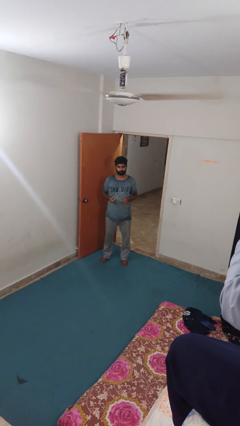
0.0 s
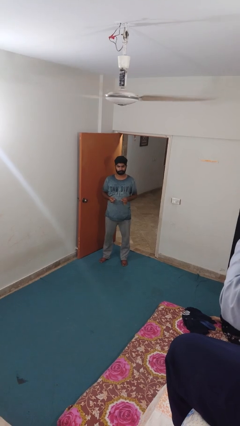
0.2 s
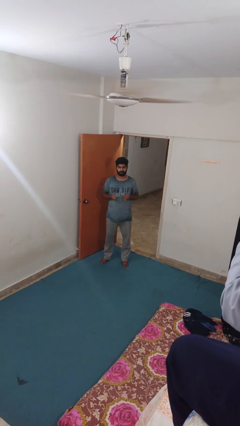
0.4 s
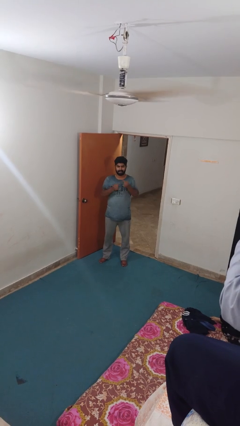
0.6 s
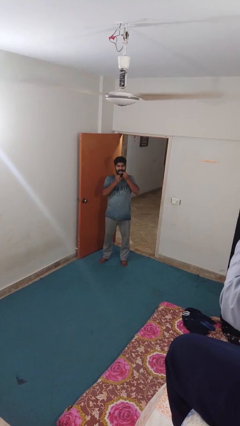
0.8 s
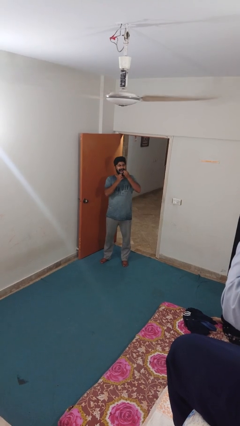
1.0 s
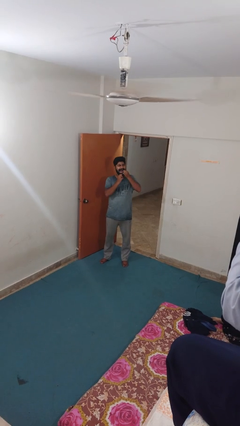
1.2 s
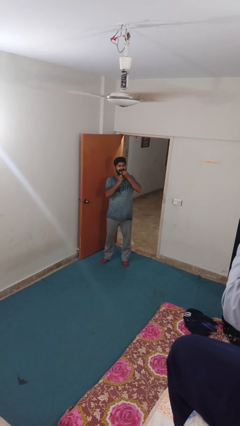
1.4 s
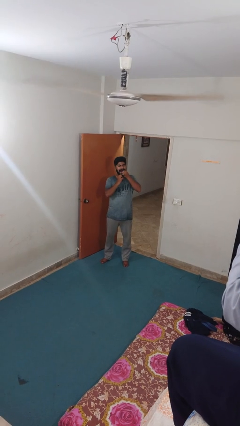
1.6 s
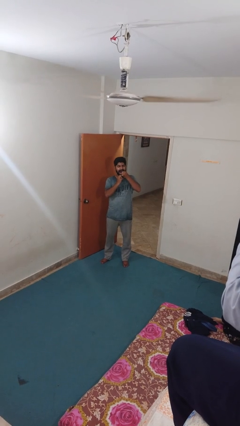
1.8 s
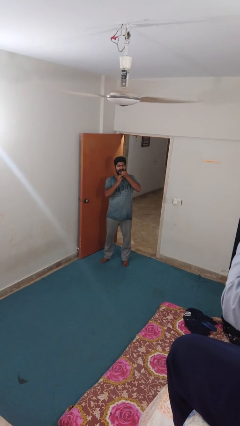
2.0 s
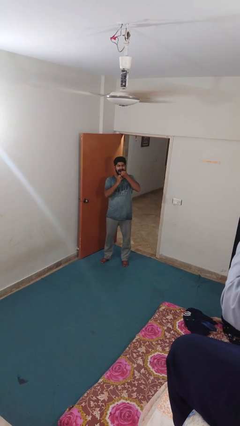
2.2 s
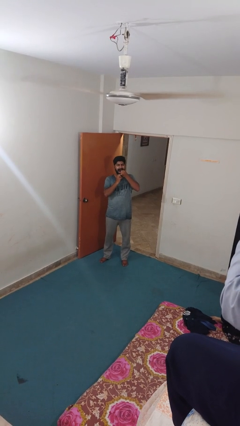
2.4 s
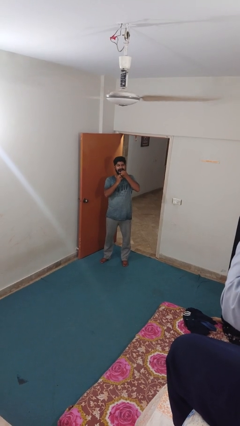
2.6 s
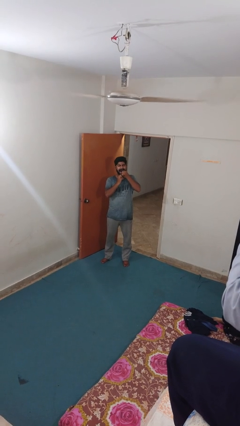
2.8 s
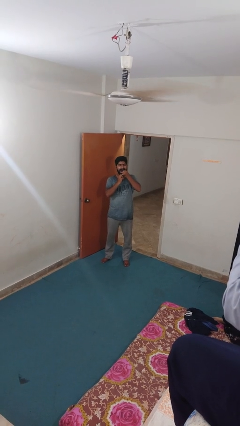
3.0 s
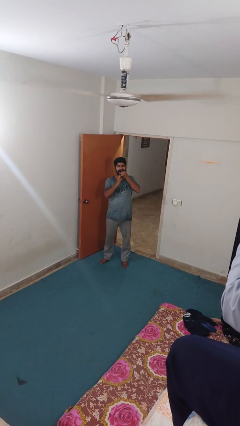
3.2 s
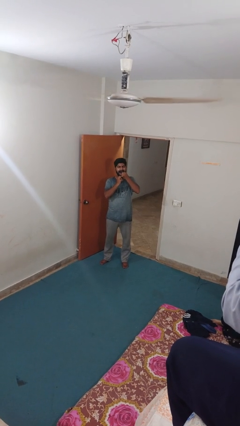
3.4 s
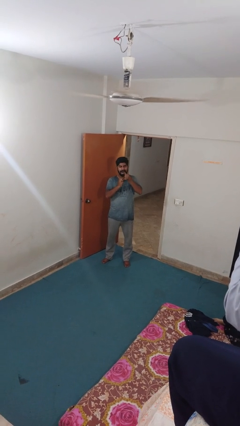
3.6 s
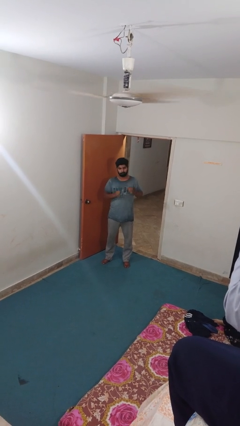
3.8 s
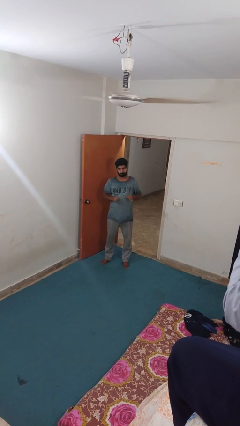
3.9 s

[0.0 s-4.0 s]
person flosses

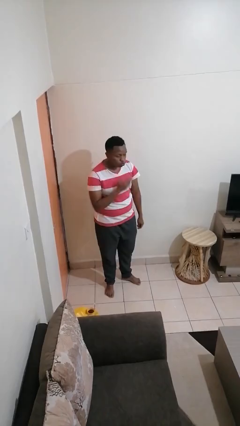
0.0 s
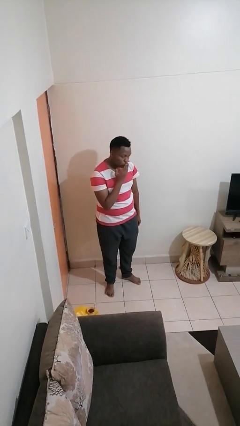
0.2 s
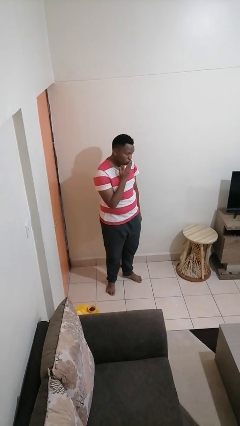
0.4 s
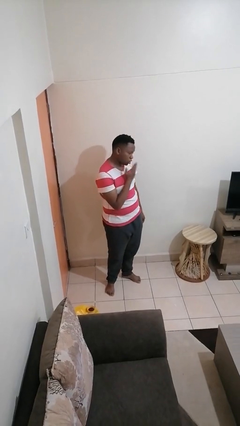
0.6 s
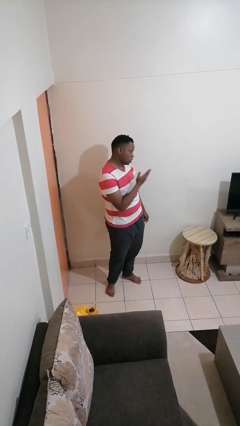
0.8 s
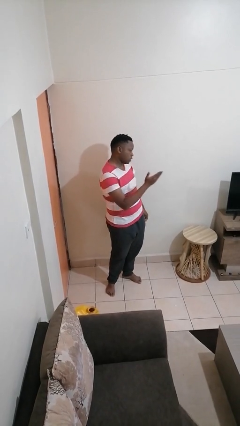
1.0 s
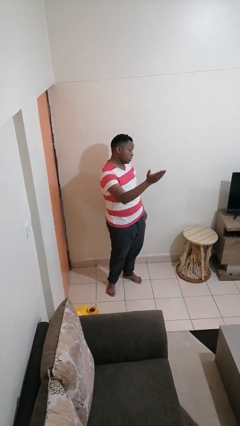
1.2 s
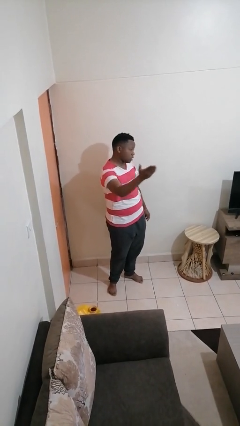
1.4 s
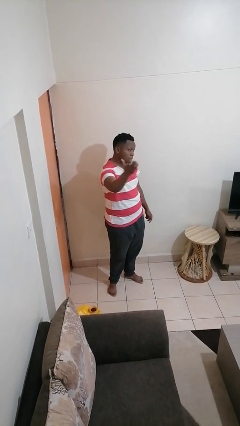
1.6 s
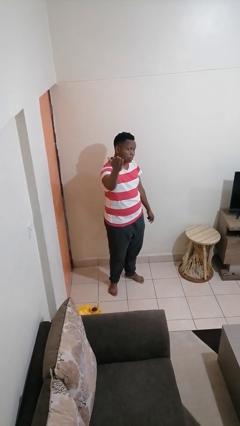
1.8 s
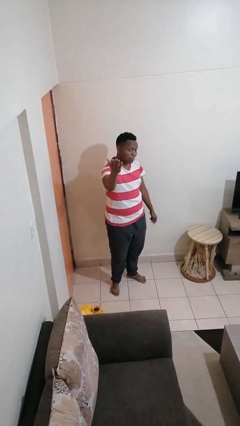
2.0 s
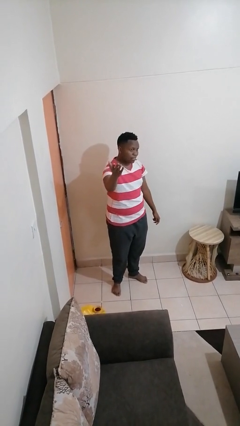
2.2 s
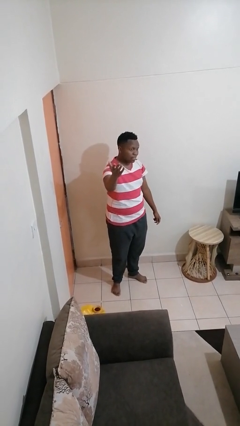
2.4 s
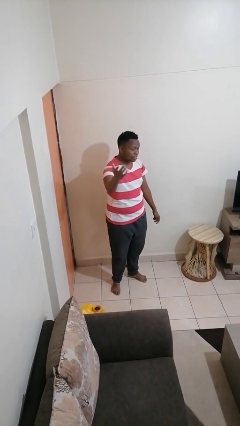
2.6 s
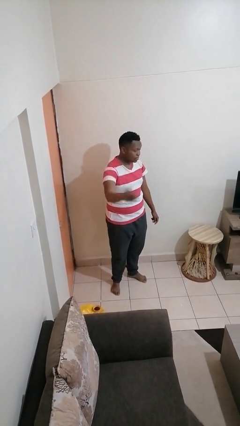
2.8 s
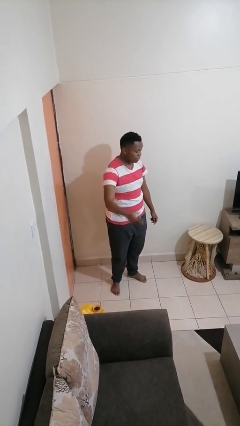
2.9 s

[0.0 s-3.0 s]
person gestures blow kiss

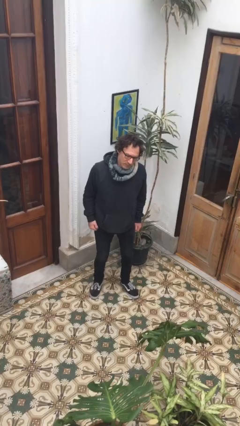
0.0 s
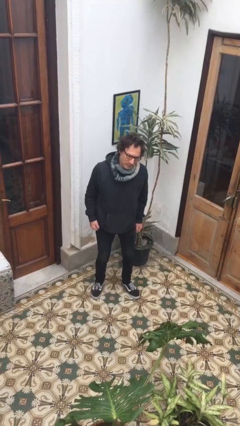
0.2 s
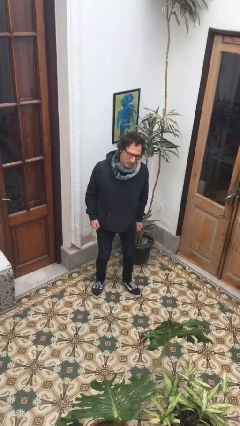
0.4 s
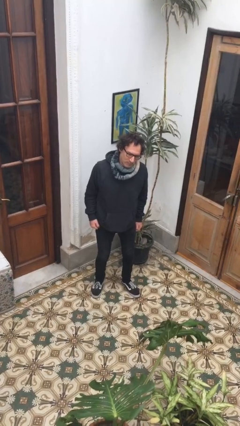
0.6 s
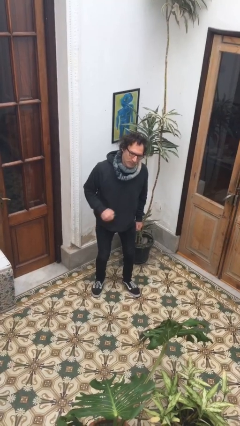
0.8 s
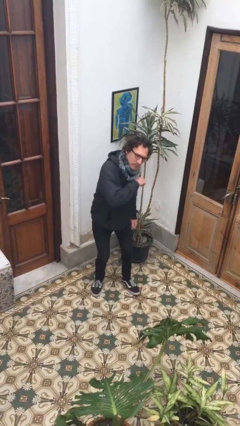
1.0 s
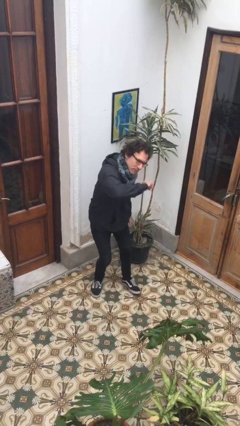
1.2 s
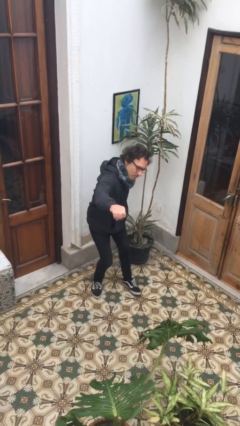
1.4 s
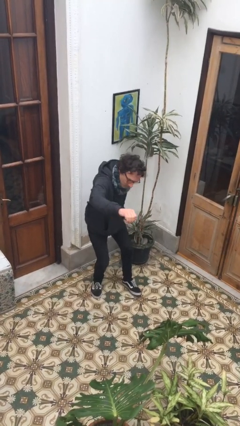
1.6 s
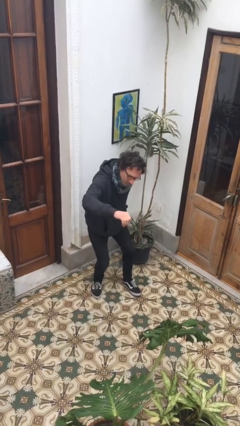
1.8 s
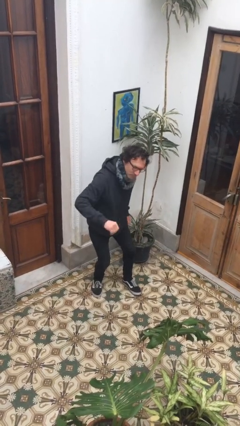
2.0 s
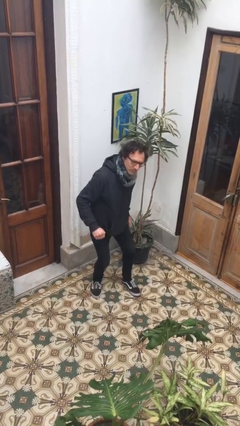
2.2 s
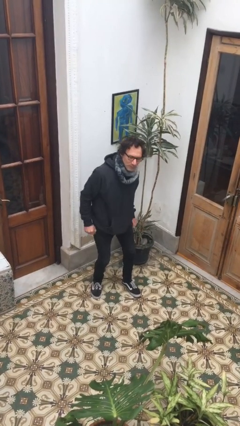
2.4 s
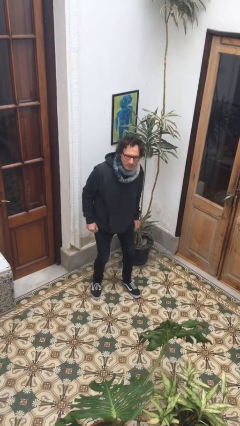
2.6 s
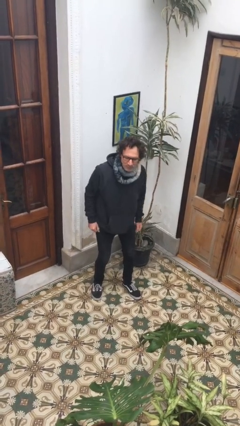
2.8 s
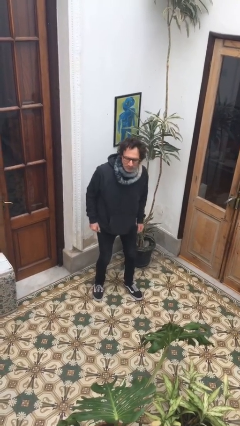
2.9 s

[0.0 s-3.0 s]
person karate chop

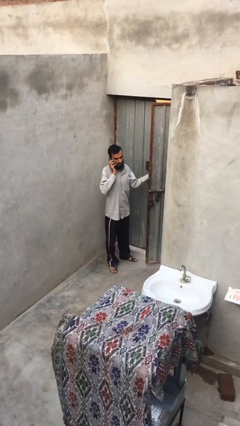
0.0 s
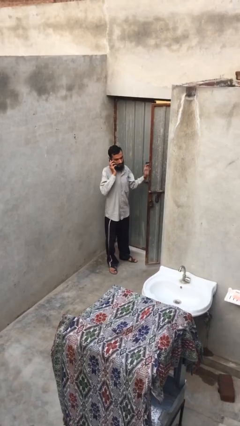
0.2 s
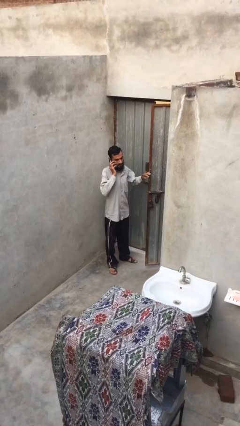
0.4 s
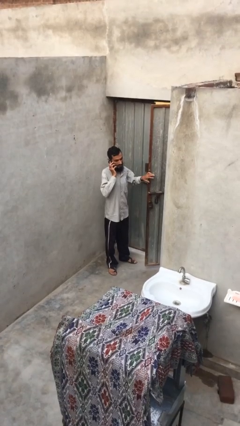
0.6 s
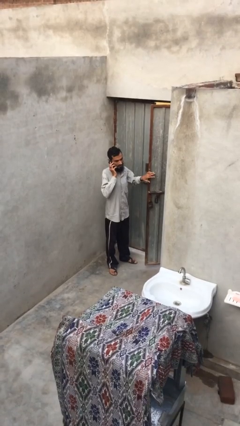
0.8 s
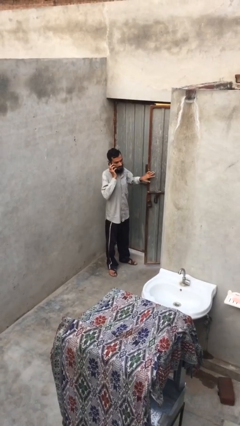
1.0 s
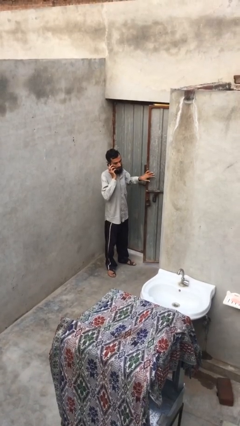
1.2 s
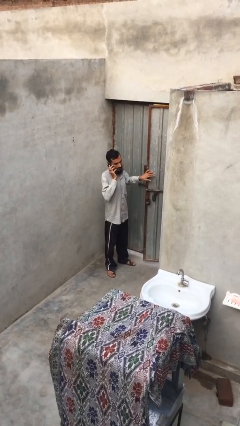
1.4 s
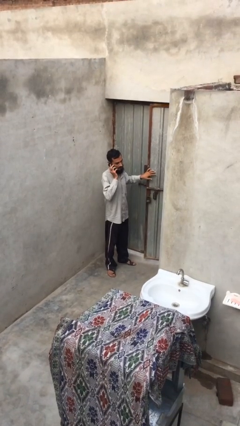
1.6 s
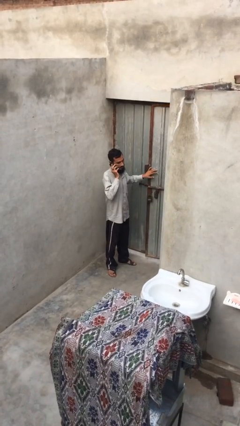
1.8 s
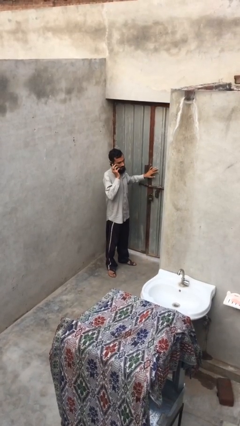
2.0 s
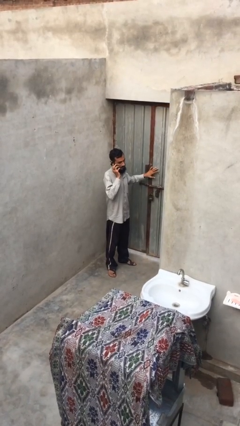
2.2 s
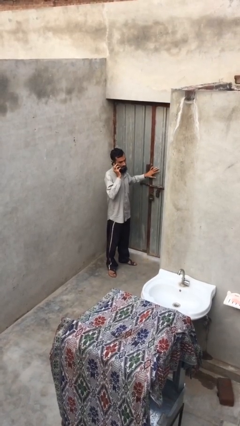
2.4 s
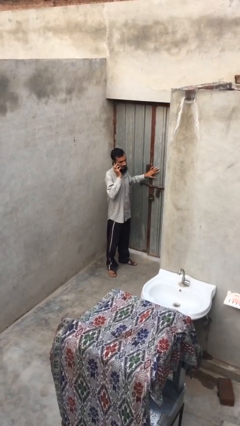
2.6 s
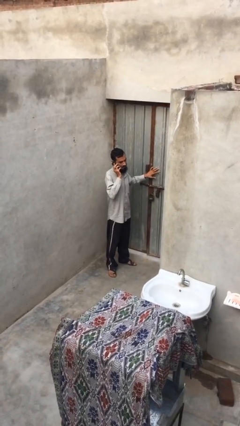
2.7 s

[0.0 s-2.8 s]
person closes facility door

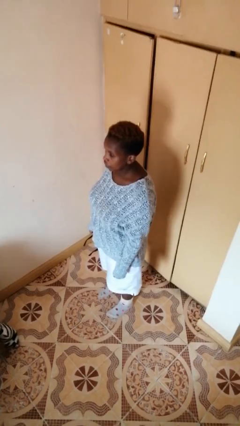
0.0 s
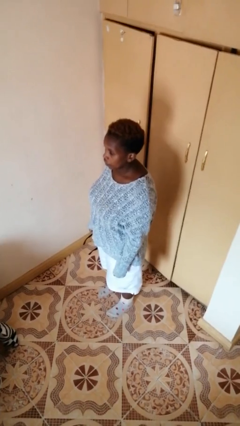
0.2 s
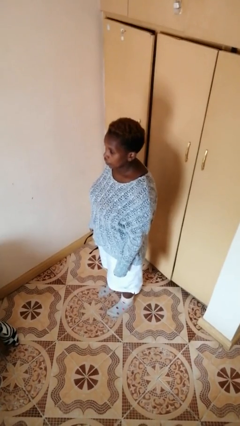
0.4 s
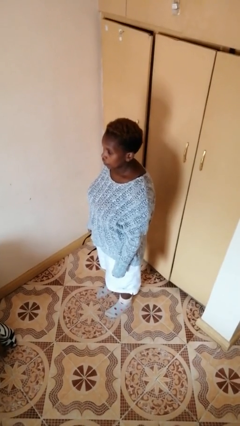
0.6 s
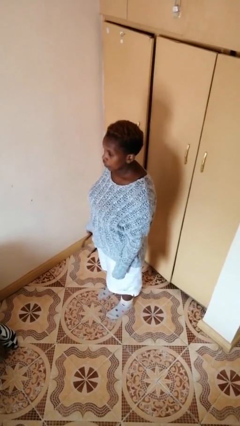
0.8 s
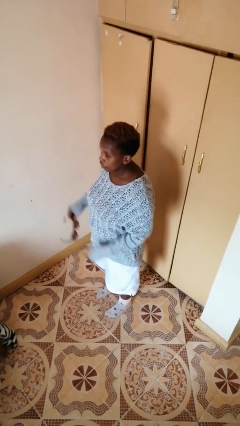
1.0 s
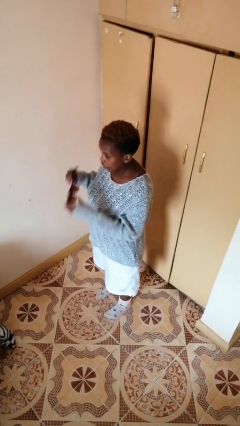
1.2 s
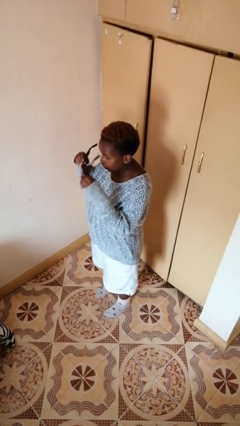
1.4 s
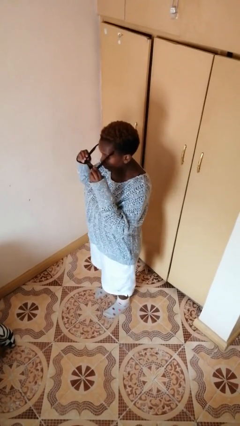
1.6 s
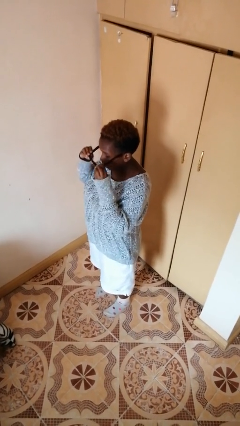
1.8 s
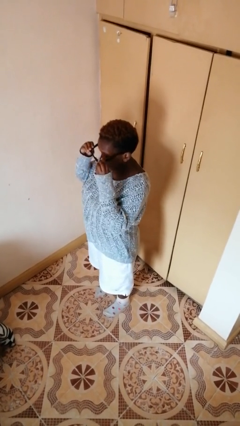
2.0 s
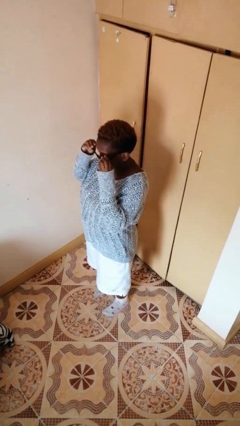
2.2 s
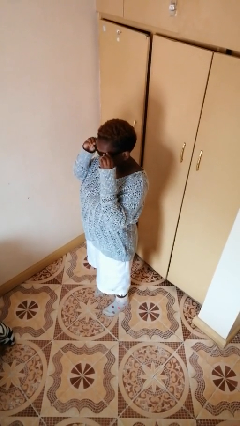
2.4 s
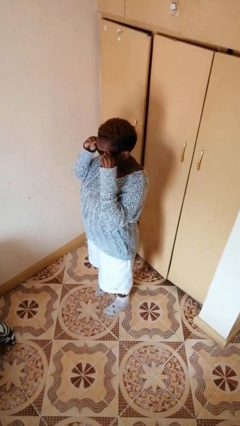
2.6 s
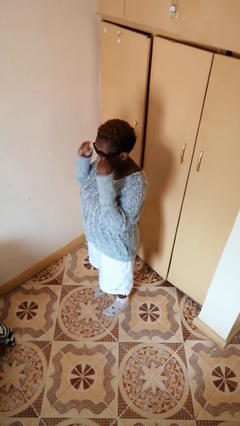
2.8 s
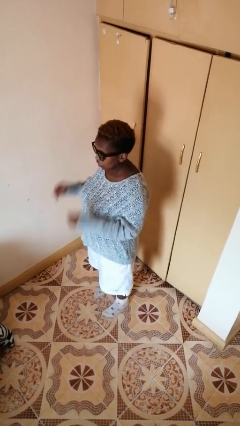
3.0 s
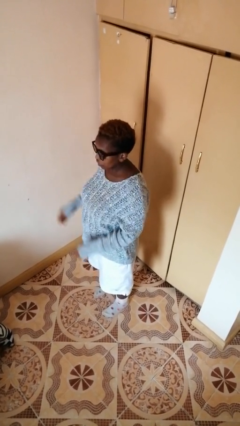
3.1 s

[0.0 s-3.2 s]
person puts on sunglasses

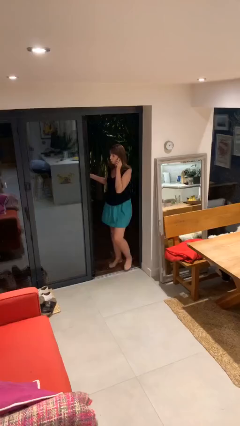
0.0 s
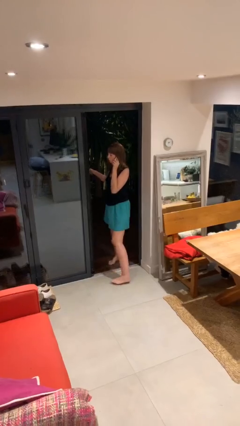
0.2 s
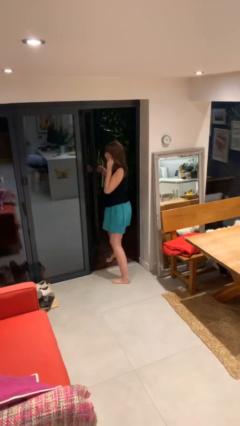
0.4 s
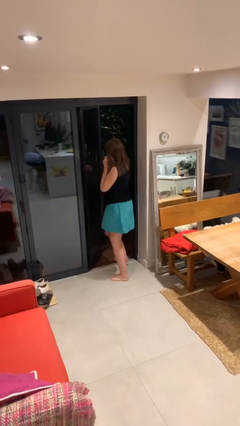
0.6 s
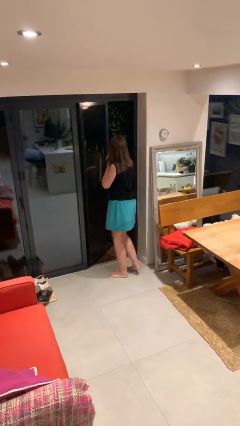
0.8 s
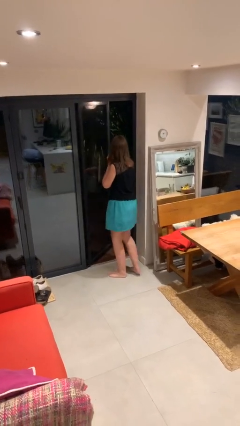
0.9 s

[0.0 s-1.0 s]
person enters scene through structure

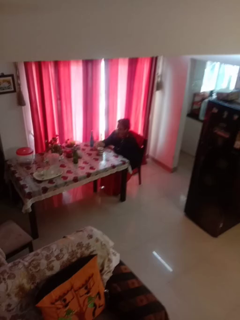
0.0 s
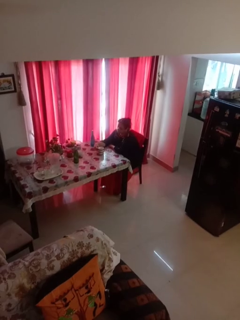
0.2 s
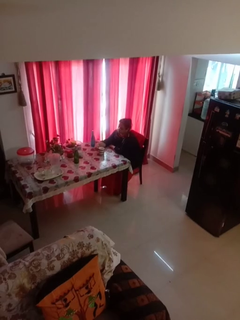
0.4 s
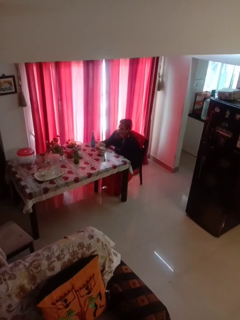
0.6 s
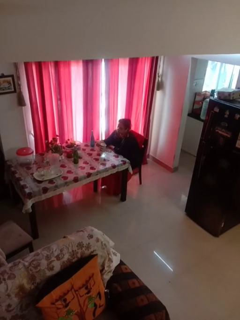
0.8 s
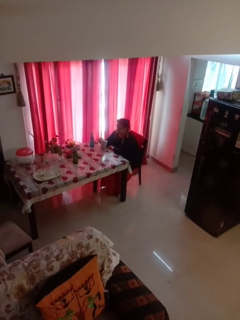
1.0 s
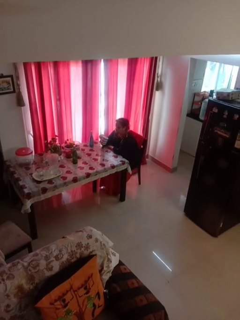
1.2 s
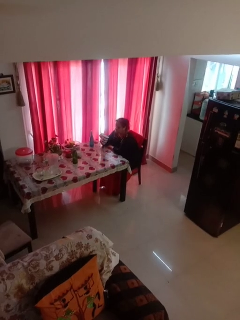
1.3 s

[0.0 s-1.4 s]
person picks up object from table
